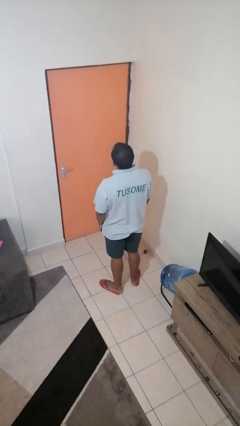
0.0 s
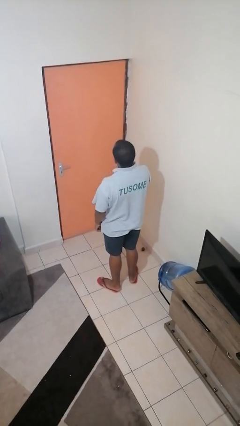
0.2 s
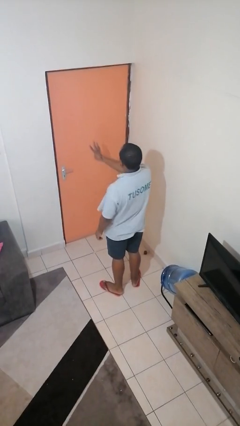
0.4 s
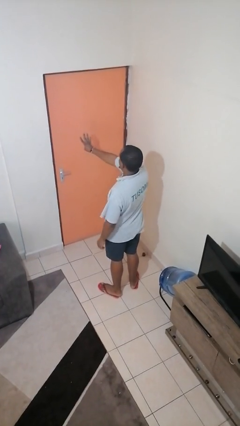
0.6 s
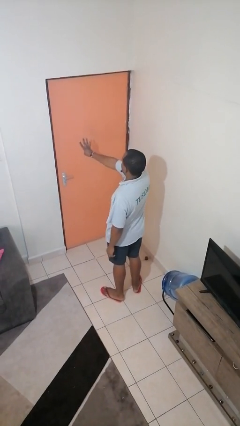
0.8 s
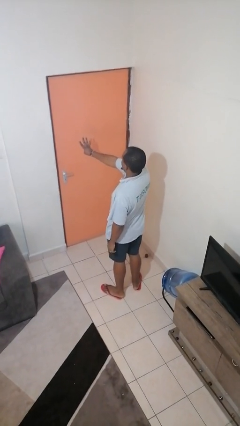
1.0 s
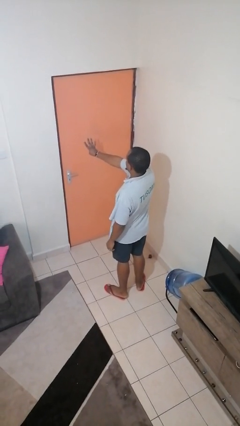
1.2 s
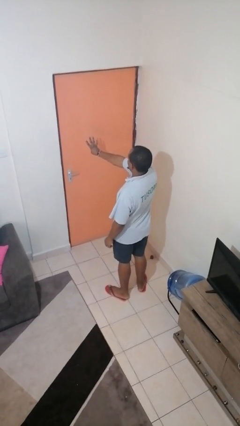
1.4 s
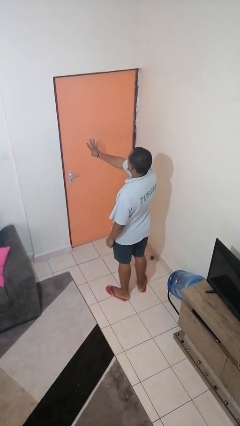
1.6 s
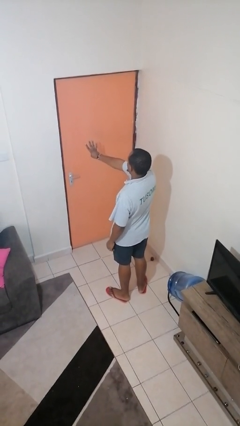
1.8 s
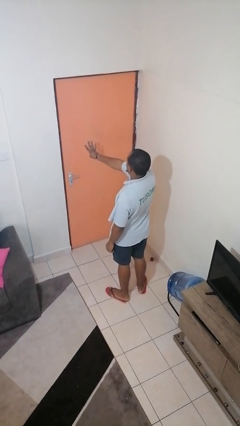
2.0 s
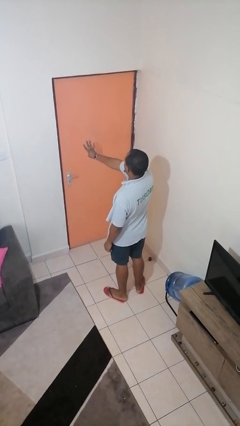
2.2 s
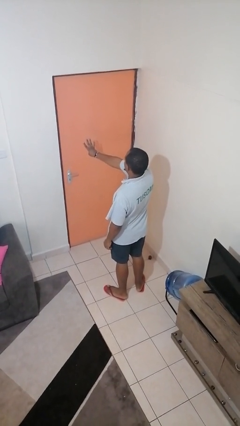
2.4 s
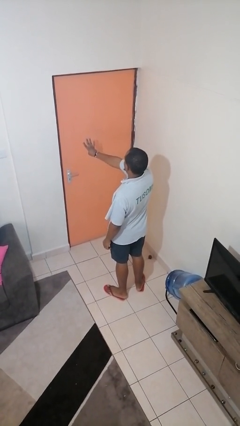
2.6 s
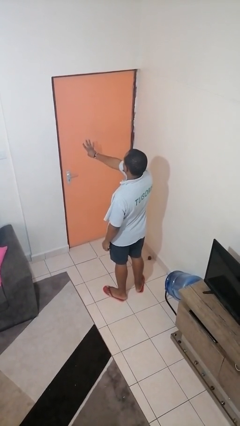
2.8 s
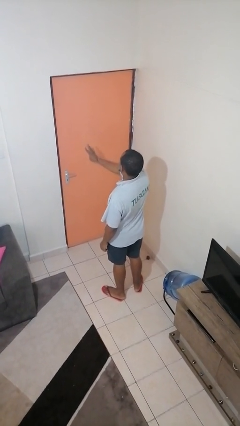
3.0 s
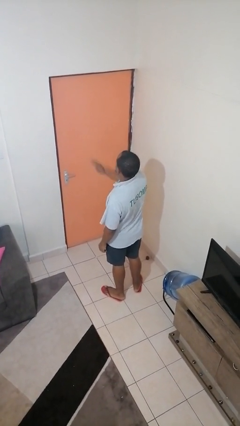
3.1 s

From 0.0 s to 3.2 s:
person gestures number four

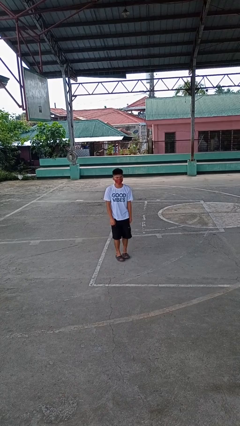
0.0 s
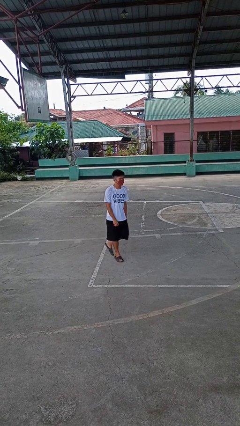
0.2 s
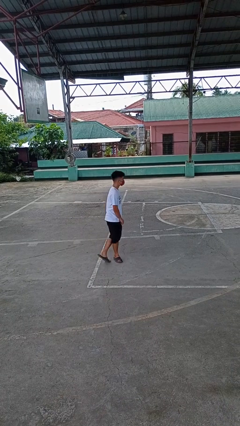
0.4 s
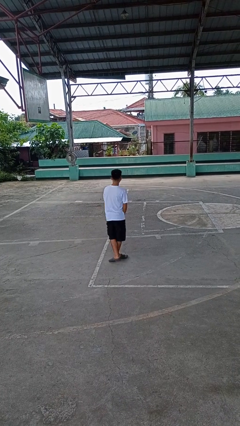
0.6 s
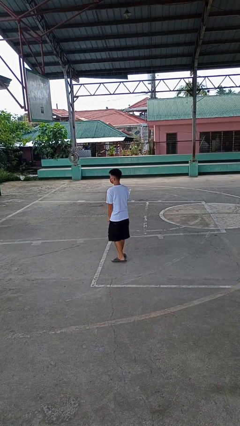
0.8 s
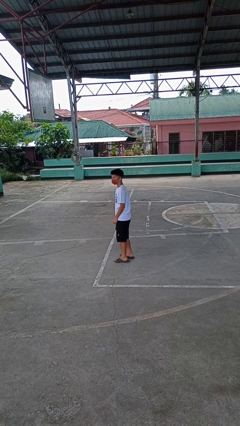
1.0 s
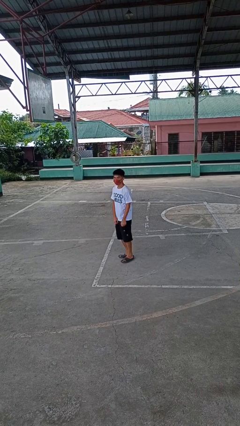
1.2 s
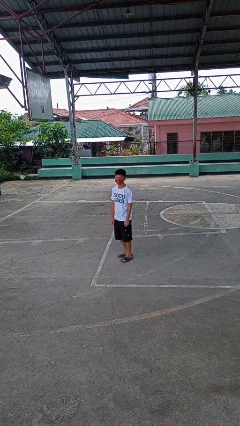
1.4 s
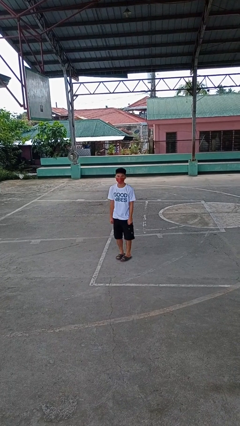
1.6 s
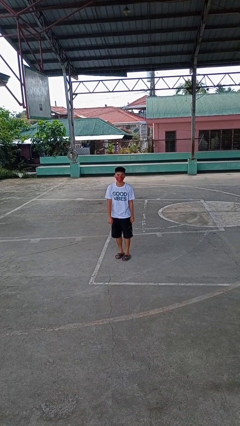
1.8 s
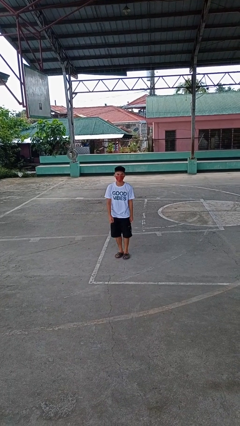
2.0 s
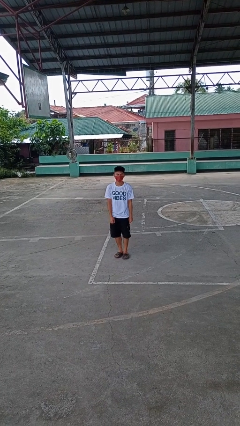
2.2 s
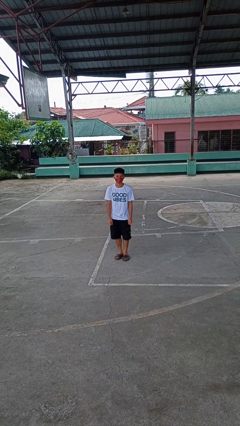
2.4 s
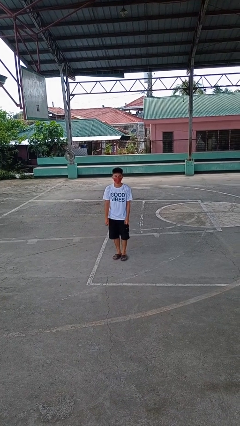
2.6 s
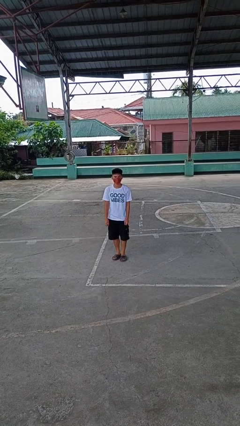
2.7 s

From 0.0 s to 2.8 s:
person twirls

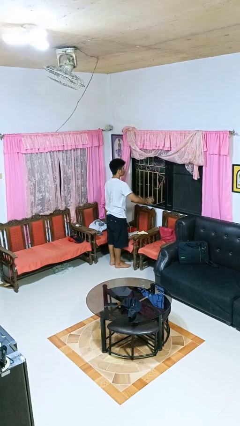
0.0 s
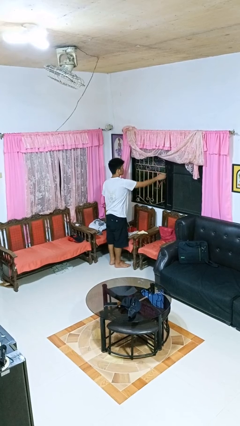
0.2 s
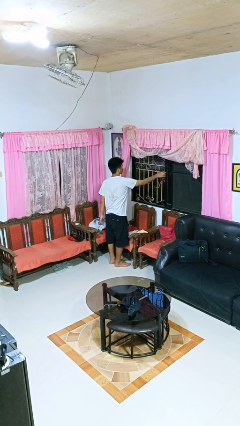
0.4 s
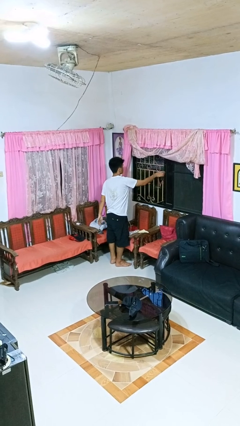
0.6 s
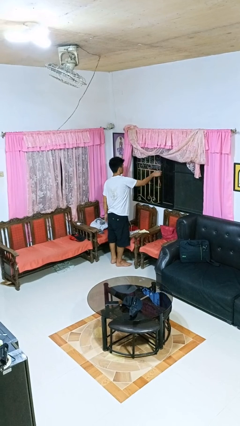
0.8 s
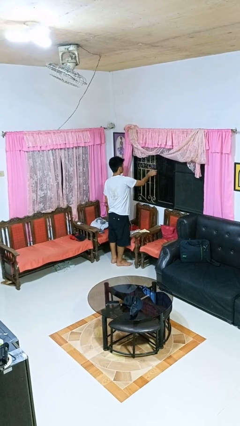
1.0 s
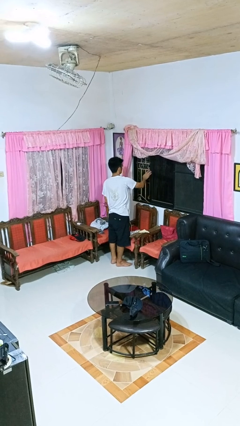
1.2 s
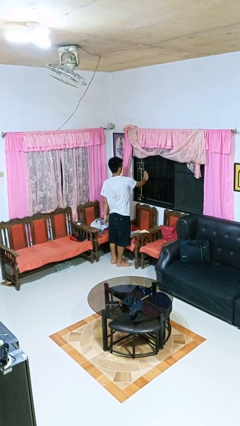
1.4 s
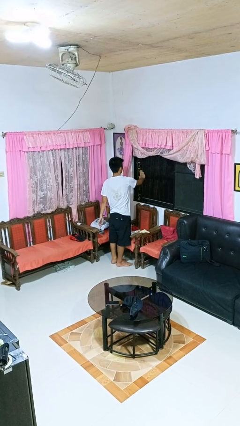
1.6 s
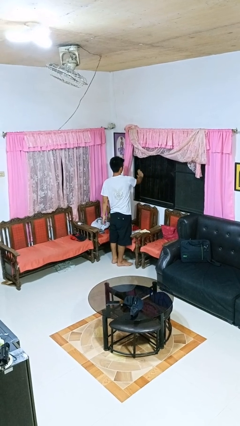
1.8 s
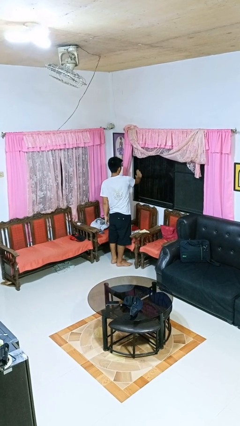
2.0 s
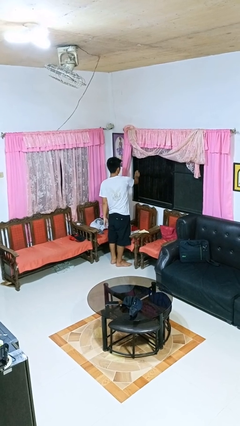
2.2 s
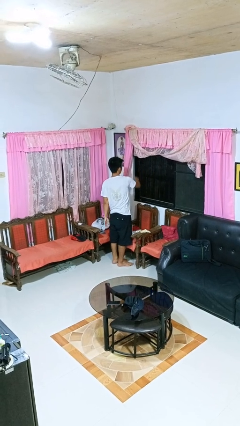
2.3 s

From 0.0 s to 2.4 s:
person closes home window

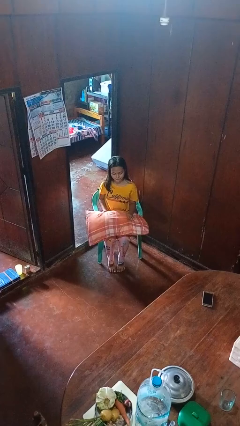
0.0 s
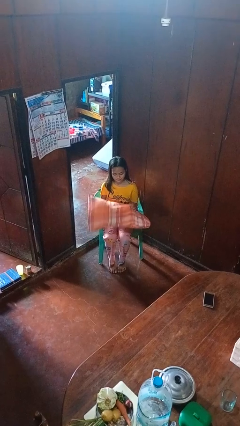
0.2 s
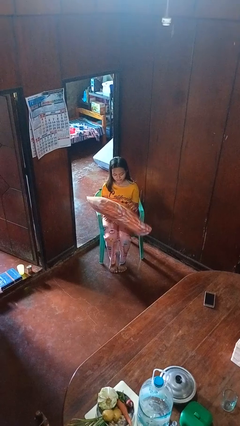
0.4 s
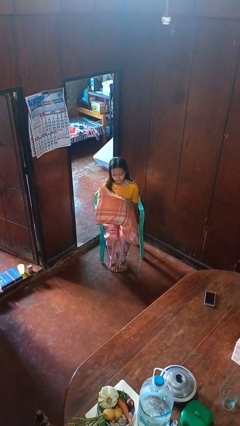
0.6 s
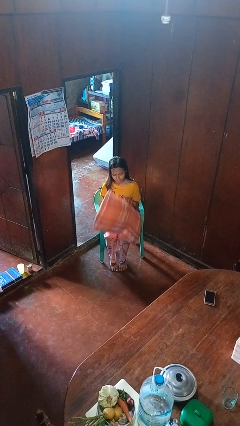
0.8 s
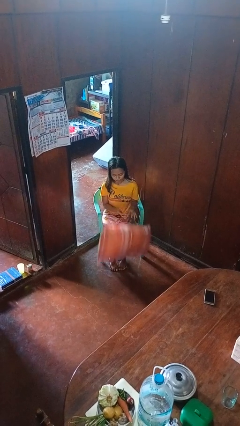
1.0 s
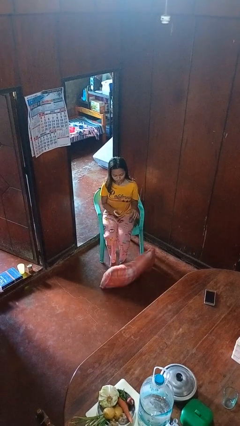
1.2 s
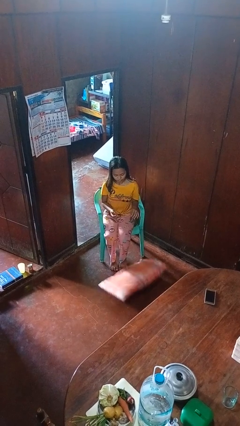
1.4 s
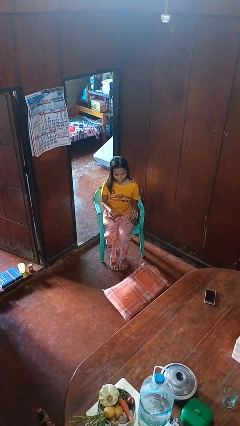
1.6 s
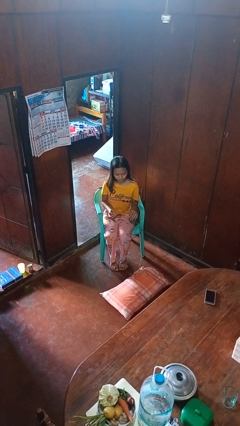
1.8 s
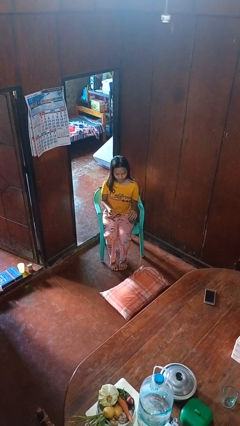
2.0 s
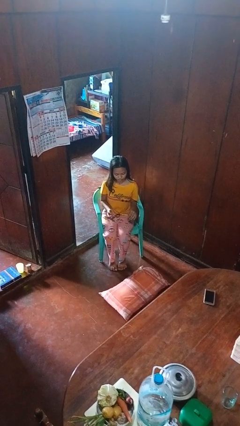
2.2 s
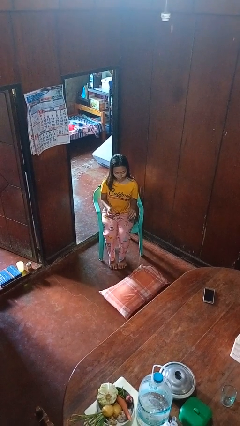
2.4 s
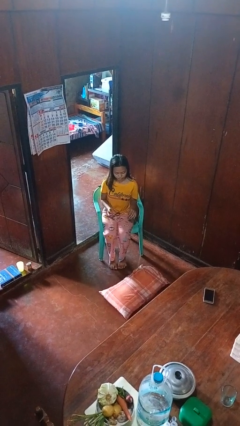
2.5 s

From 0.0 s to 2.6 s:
person drops object

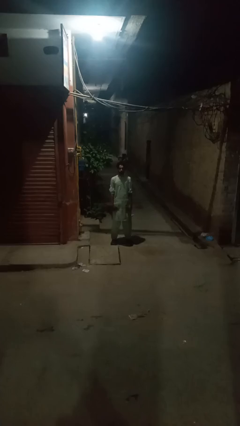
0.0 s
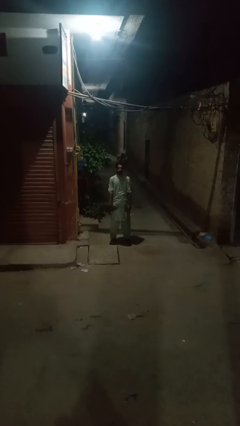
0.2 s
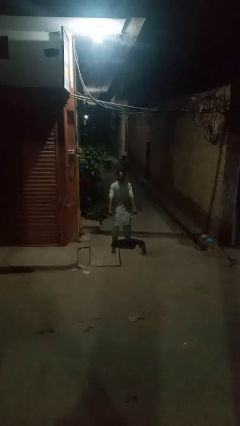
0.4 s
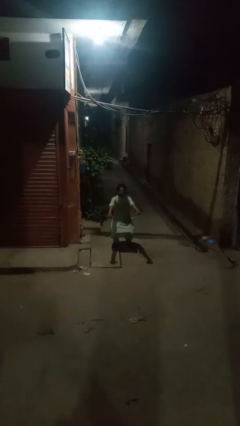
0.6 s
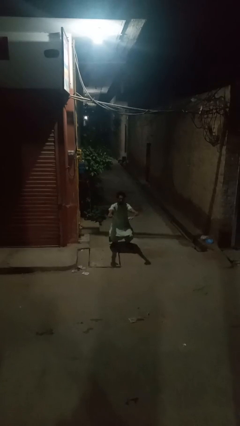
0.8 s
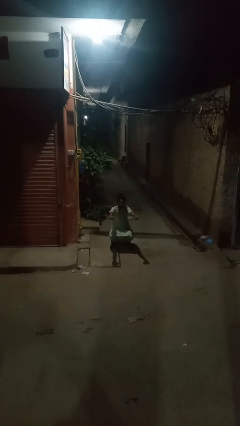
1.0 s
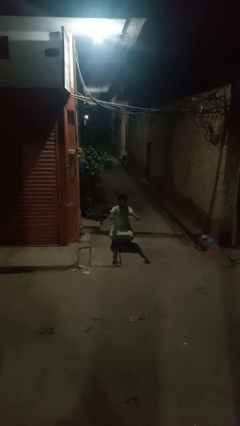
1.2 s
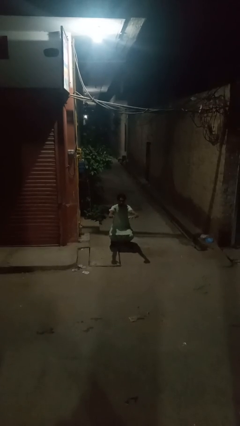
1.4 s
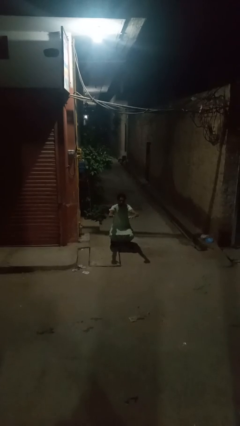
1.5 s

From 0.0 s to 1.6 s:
person squats

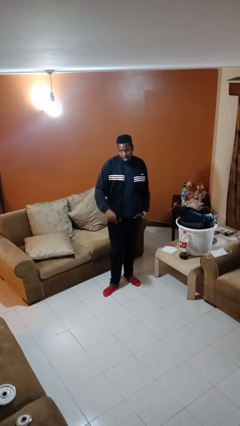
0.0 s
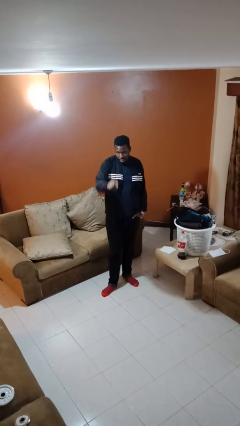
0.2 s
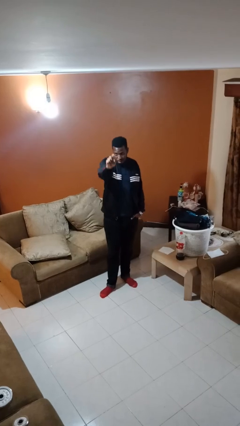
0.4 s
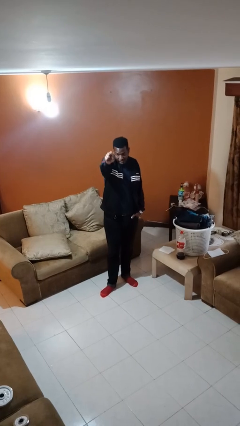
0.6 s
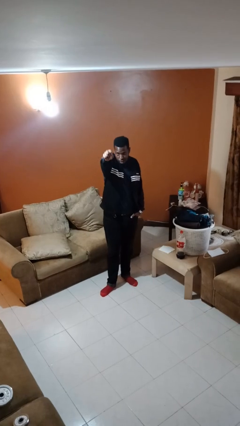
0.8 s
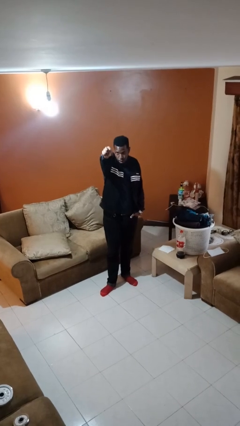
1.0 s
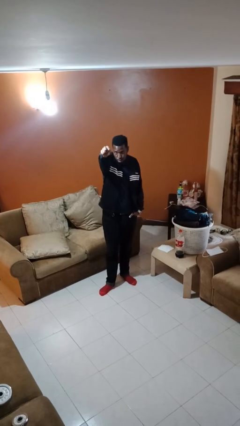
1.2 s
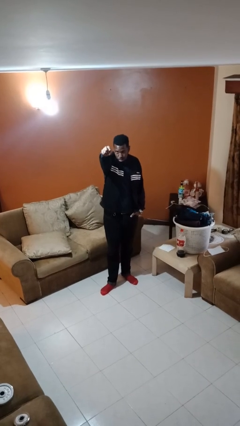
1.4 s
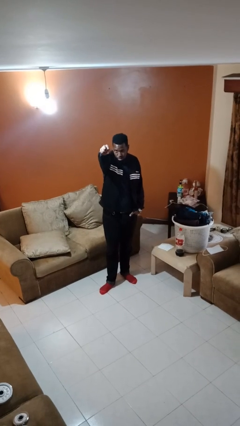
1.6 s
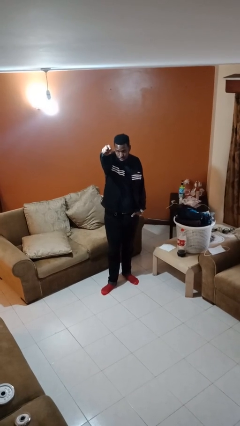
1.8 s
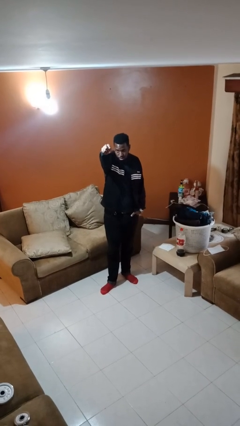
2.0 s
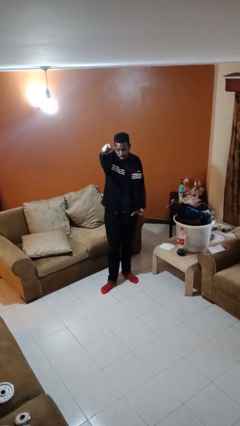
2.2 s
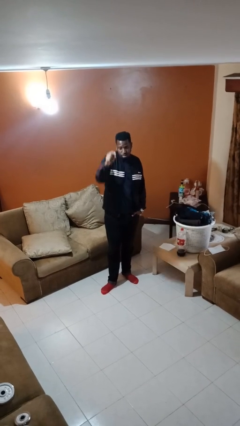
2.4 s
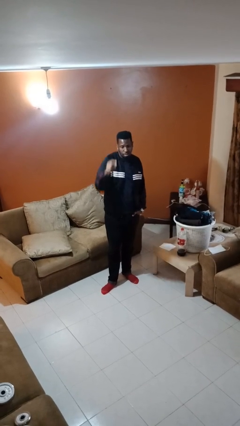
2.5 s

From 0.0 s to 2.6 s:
person points at person

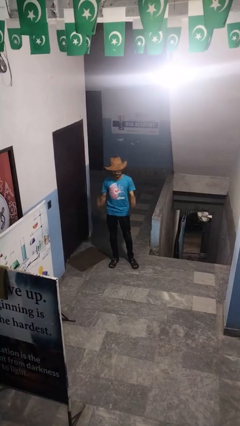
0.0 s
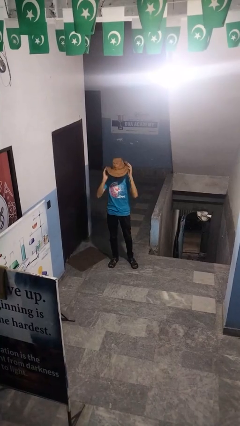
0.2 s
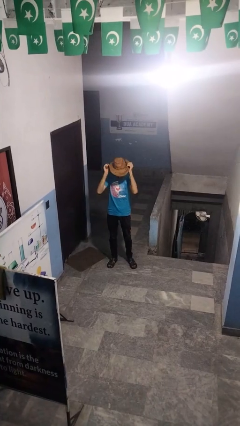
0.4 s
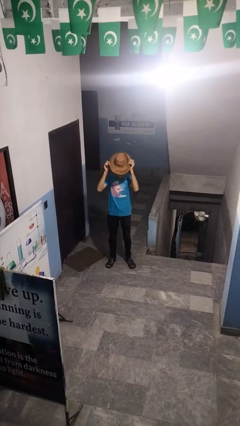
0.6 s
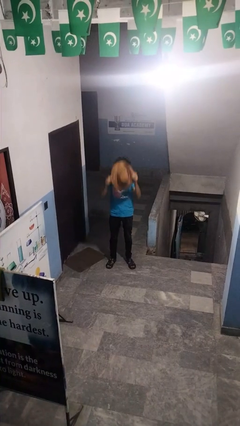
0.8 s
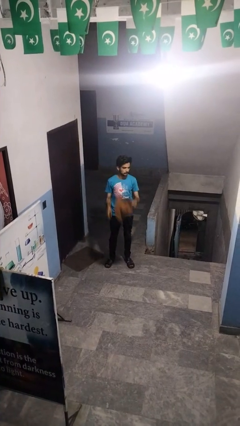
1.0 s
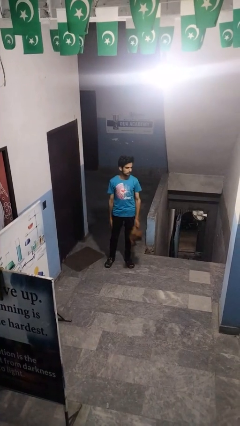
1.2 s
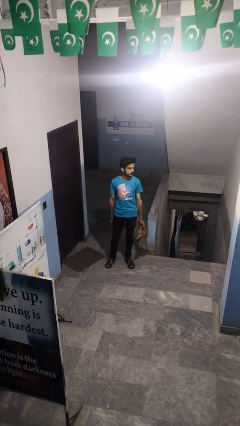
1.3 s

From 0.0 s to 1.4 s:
person takes off hat

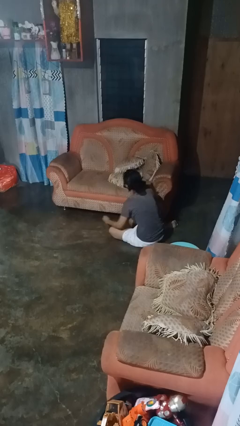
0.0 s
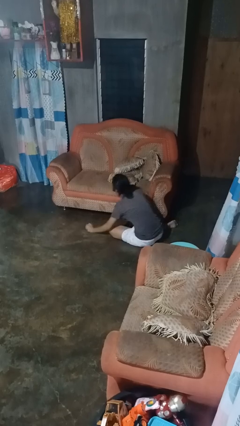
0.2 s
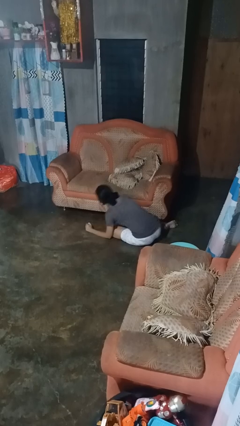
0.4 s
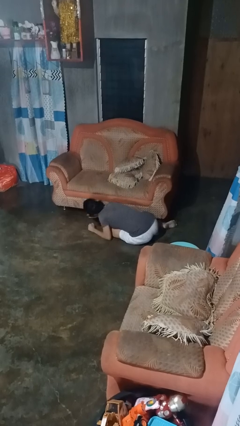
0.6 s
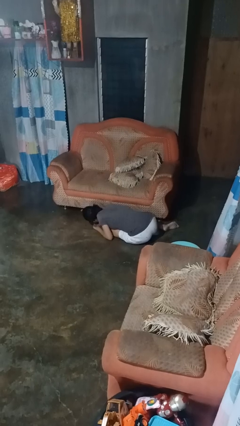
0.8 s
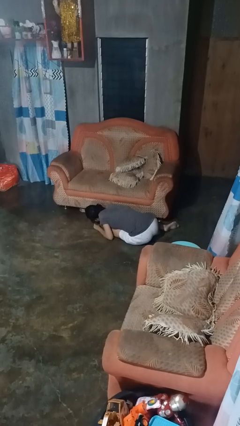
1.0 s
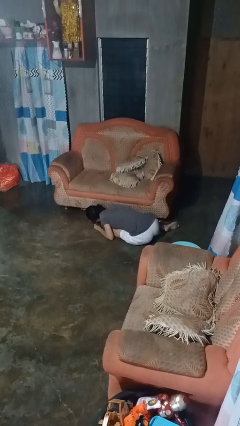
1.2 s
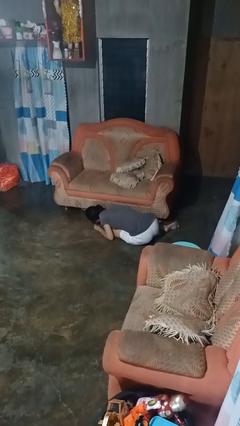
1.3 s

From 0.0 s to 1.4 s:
person searches under couch
